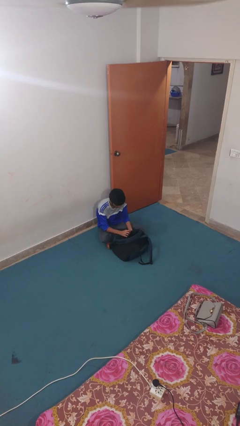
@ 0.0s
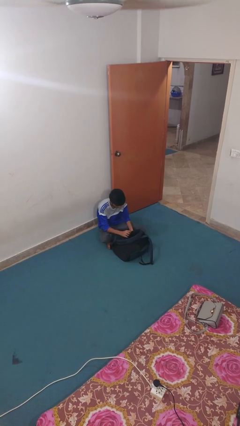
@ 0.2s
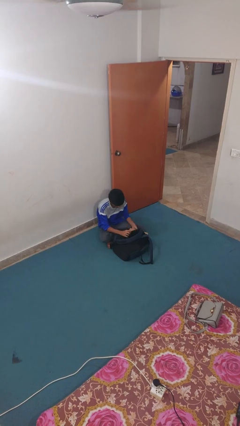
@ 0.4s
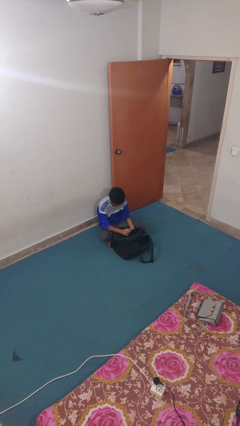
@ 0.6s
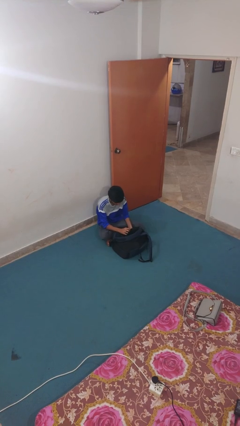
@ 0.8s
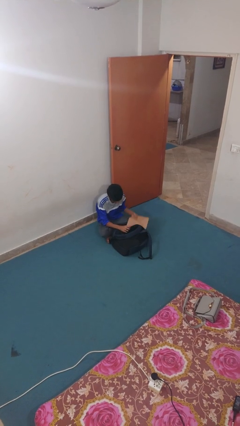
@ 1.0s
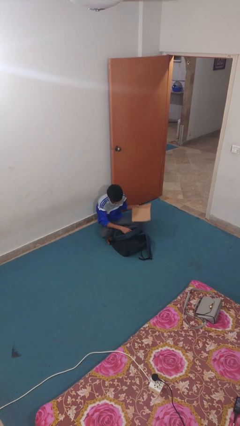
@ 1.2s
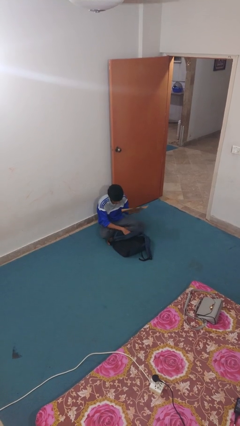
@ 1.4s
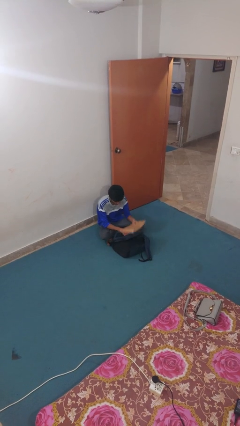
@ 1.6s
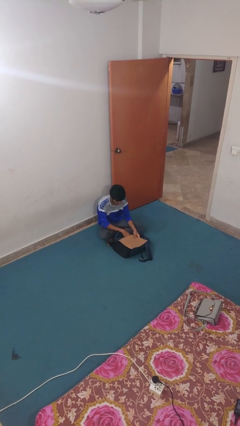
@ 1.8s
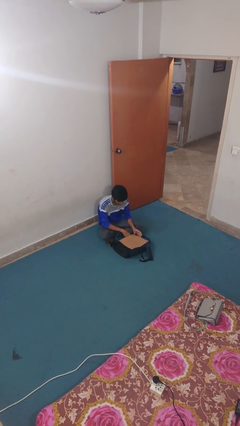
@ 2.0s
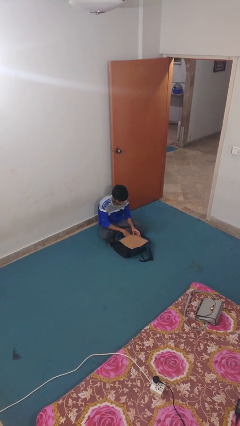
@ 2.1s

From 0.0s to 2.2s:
person takes object from backpack

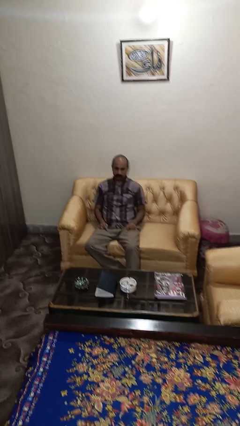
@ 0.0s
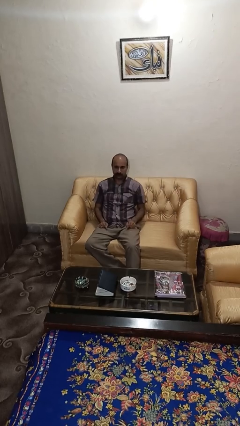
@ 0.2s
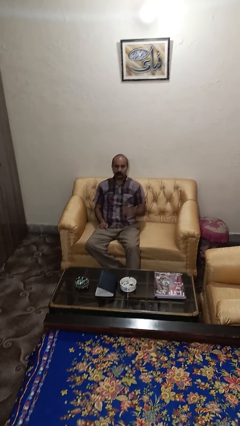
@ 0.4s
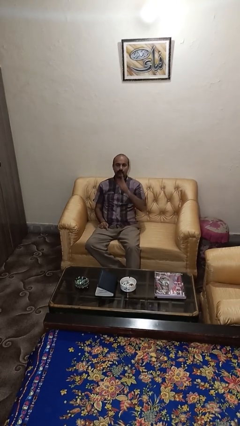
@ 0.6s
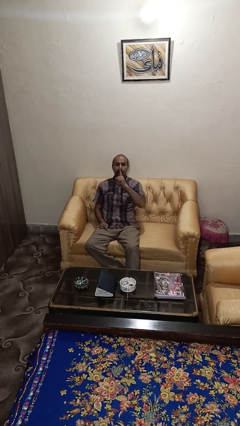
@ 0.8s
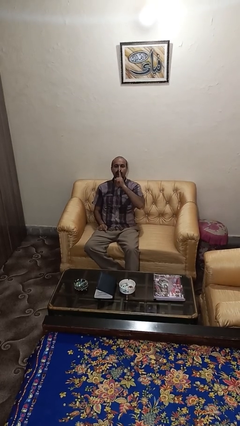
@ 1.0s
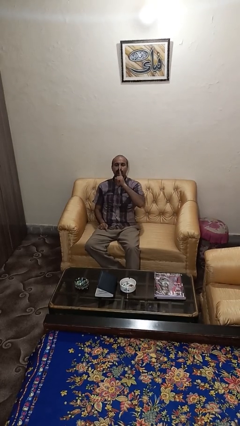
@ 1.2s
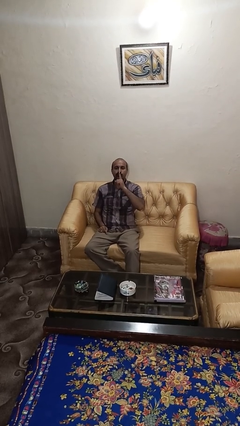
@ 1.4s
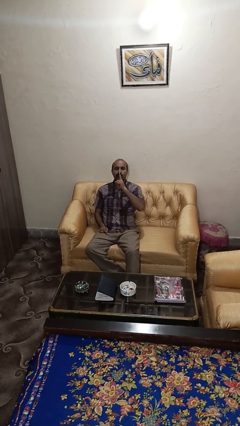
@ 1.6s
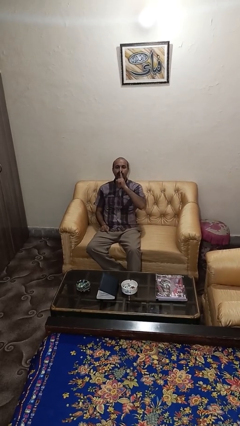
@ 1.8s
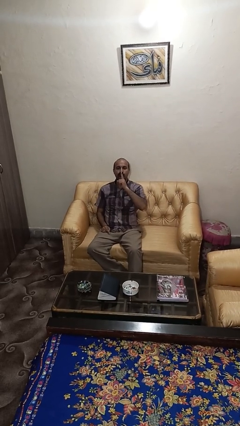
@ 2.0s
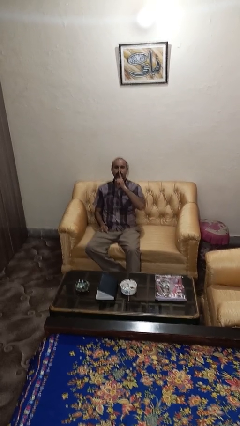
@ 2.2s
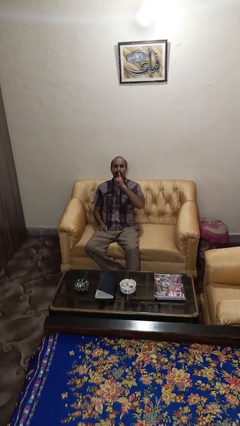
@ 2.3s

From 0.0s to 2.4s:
person gestures be quiet

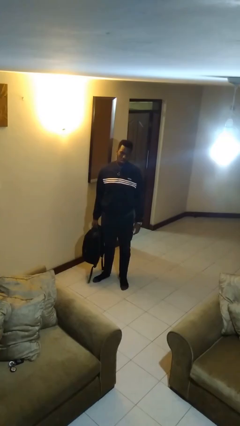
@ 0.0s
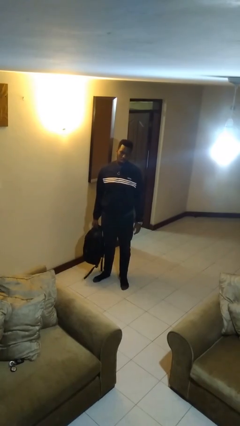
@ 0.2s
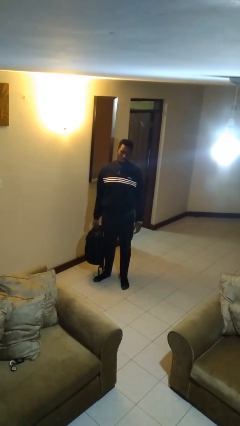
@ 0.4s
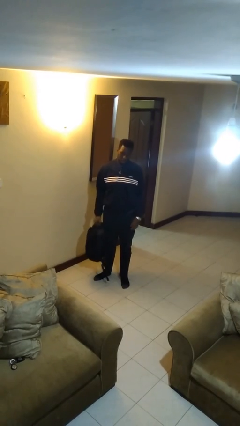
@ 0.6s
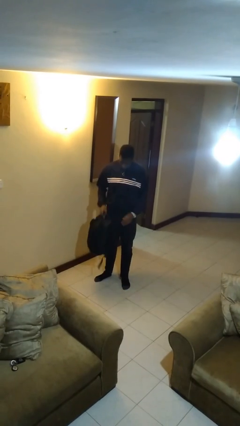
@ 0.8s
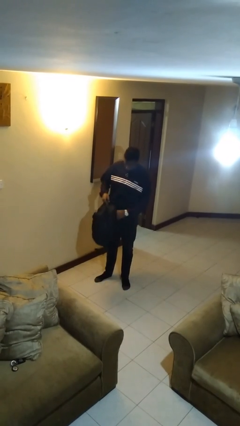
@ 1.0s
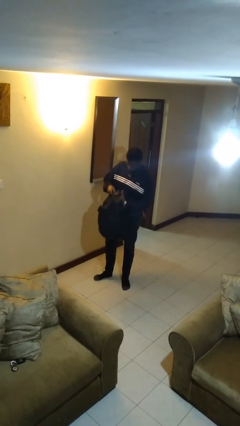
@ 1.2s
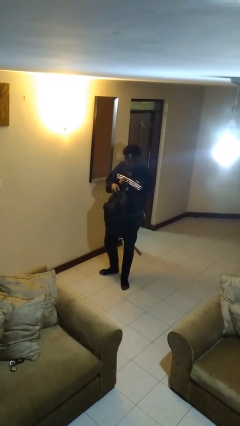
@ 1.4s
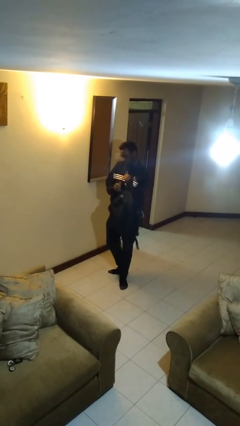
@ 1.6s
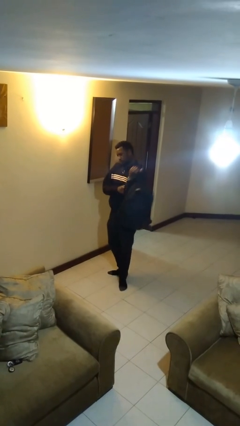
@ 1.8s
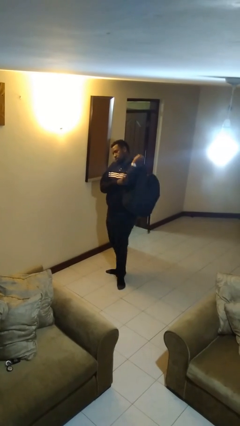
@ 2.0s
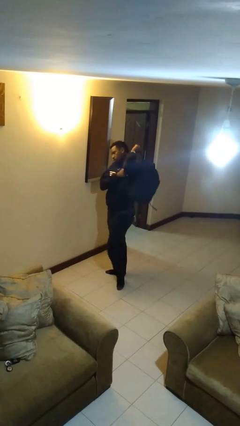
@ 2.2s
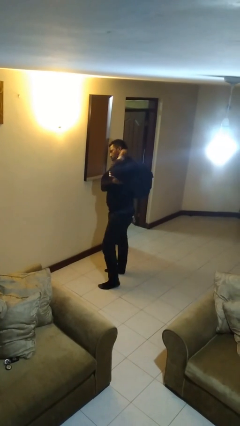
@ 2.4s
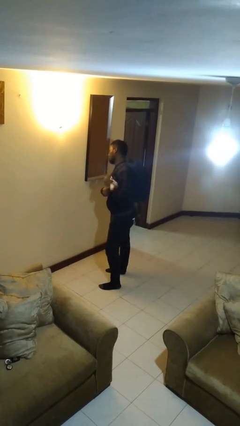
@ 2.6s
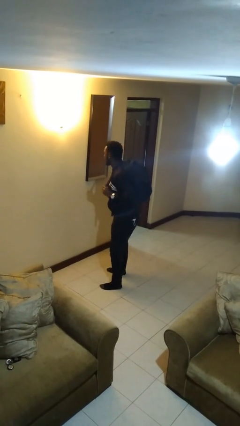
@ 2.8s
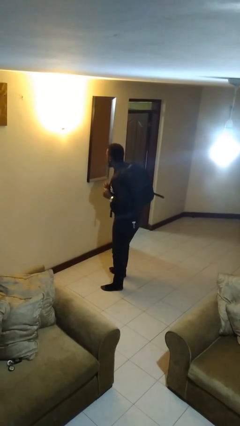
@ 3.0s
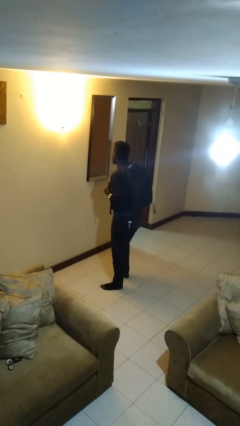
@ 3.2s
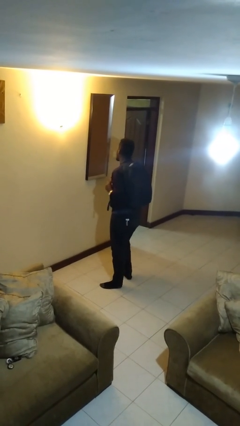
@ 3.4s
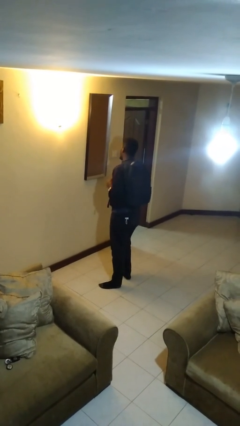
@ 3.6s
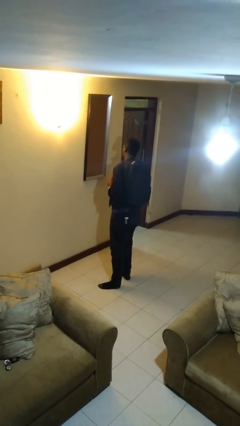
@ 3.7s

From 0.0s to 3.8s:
person puts on backpack

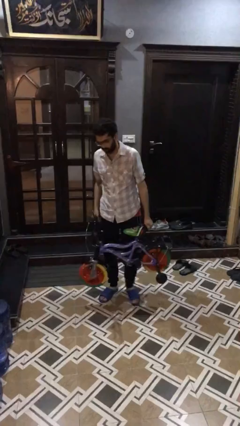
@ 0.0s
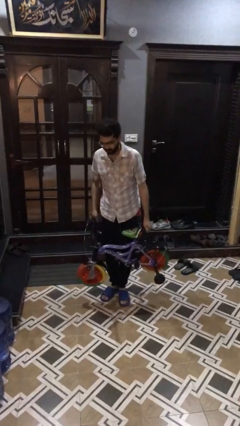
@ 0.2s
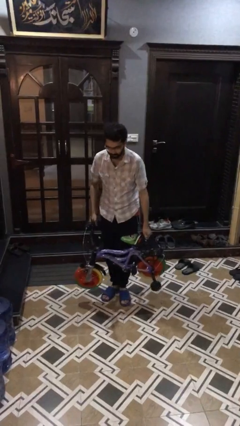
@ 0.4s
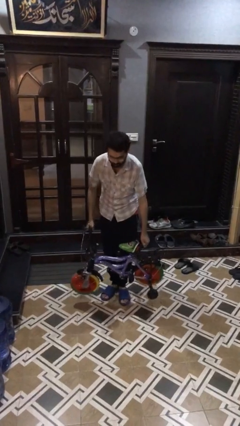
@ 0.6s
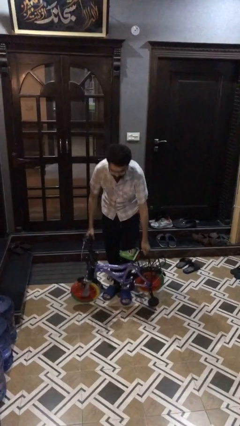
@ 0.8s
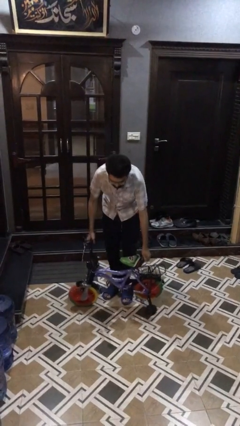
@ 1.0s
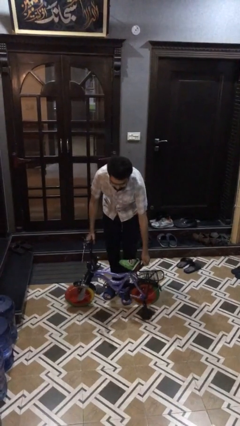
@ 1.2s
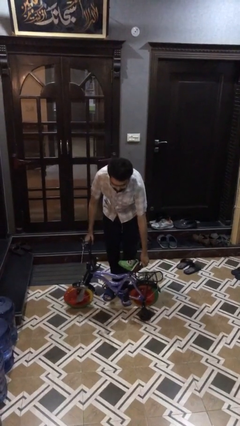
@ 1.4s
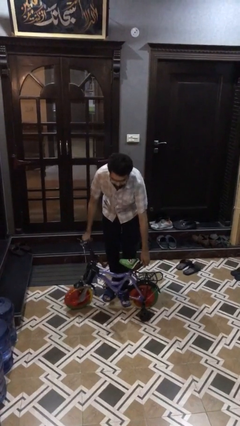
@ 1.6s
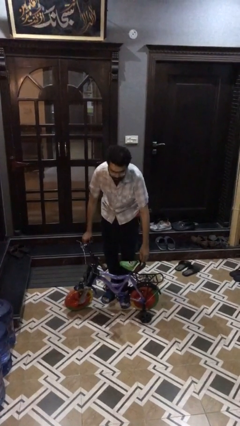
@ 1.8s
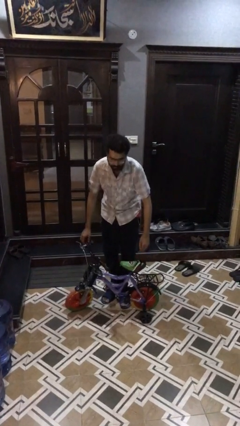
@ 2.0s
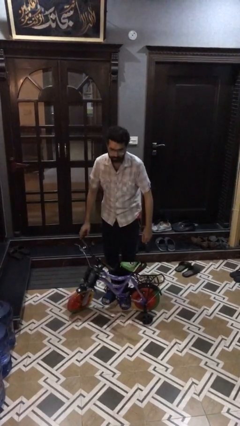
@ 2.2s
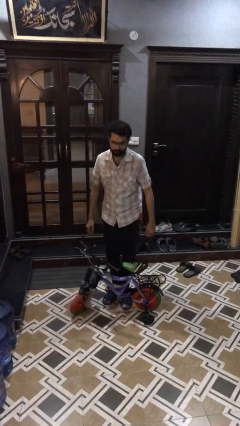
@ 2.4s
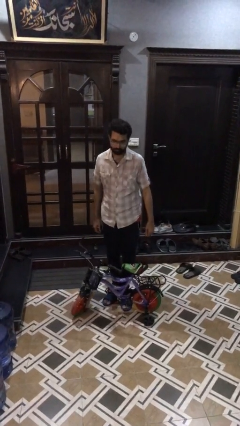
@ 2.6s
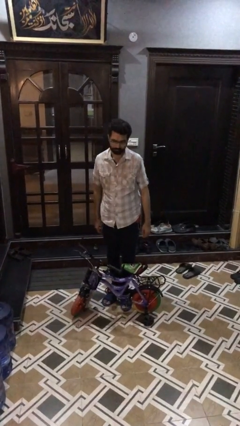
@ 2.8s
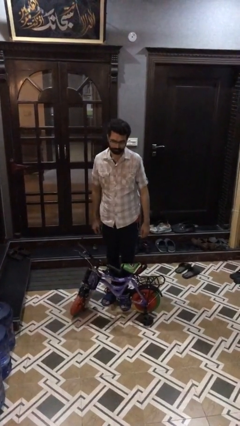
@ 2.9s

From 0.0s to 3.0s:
person puts down object on floor

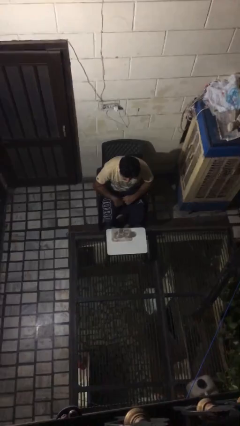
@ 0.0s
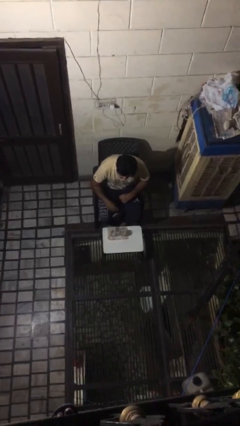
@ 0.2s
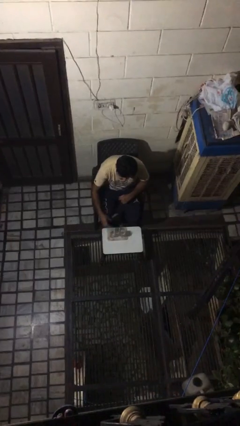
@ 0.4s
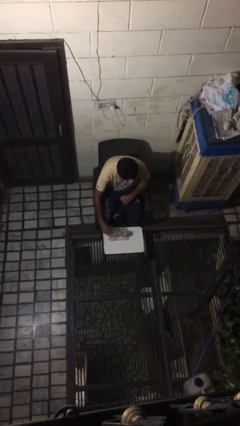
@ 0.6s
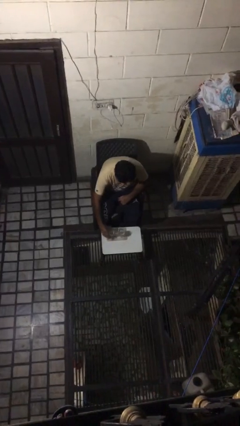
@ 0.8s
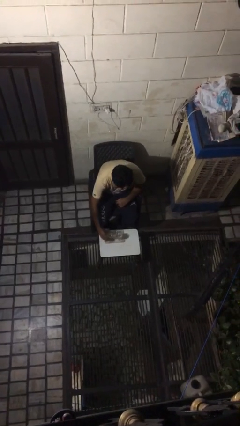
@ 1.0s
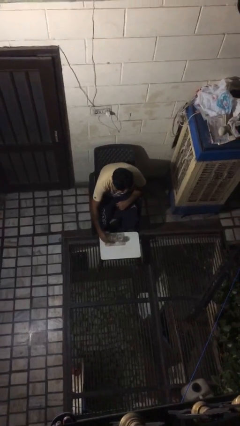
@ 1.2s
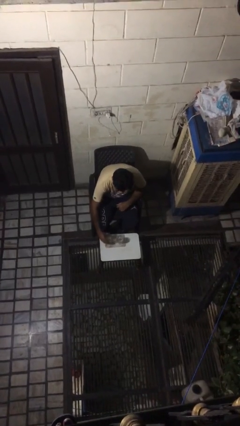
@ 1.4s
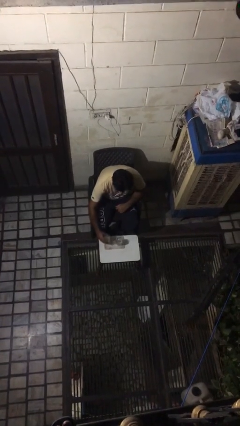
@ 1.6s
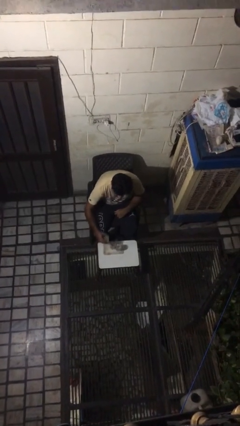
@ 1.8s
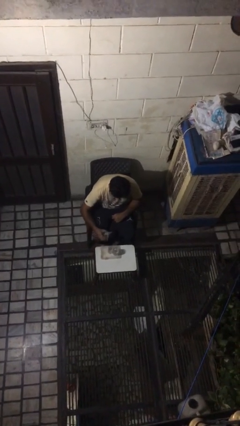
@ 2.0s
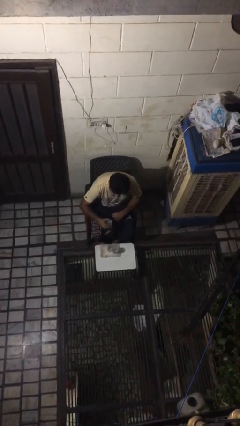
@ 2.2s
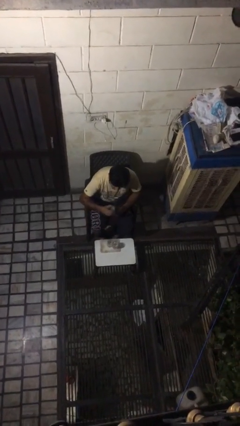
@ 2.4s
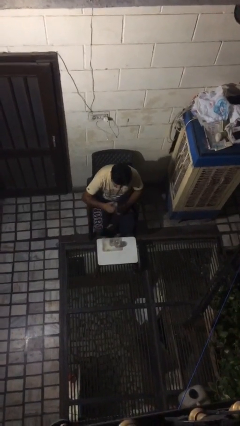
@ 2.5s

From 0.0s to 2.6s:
person picks up object from table

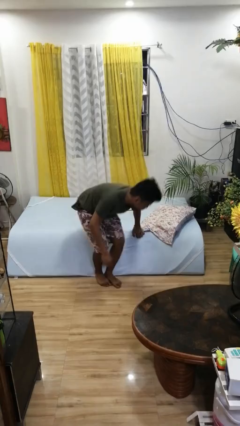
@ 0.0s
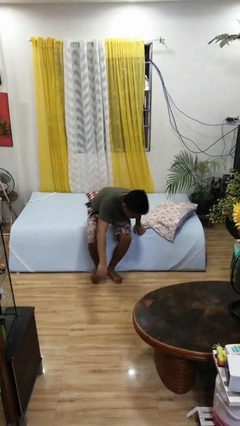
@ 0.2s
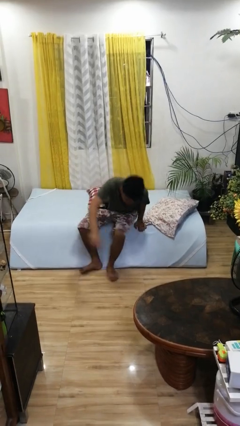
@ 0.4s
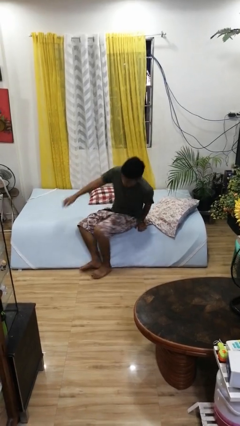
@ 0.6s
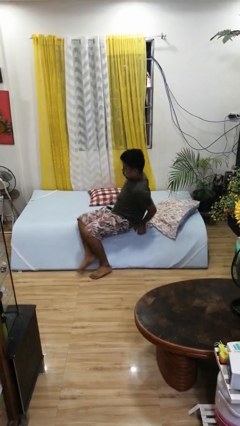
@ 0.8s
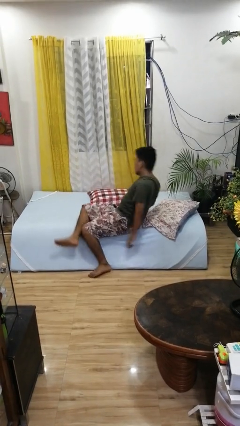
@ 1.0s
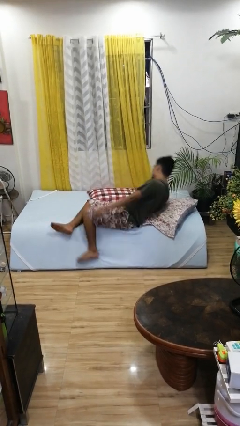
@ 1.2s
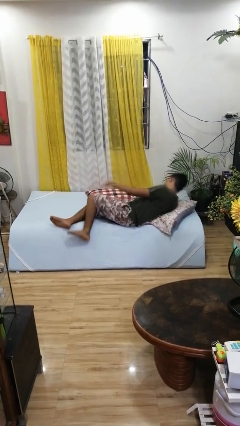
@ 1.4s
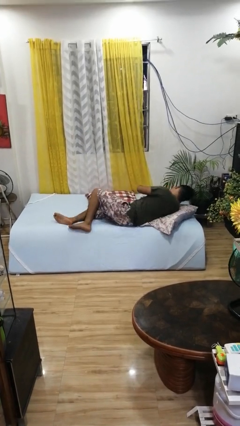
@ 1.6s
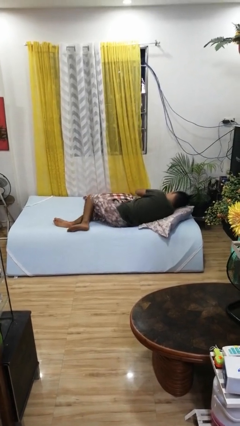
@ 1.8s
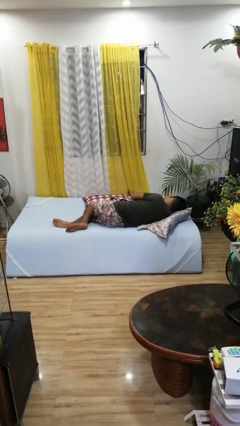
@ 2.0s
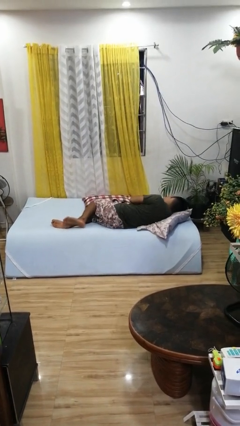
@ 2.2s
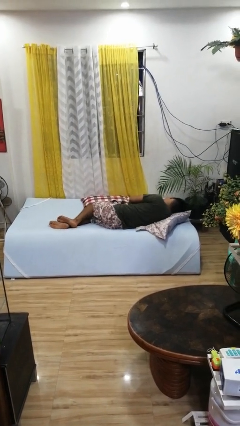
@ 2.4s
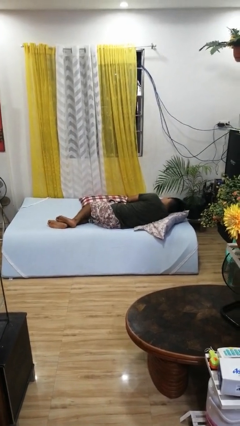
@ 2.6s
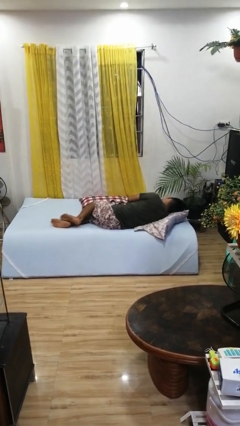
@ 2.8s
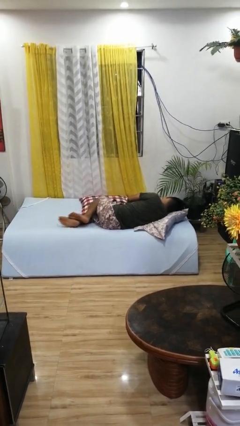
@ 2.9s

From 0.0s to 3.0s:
person lies down on bed

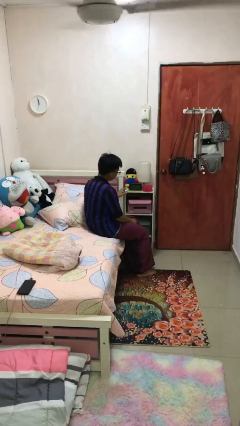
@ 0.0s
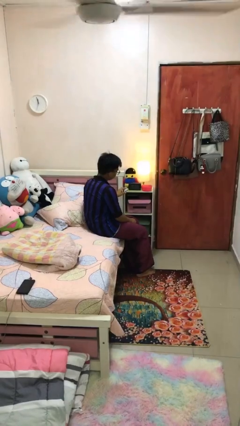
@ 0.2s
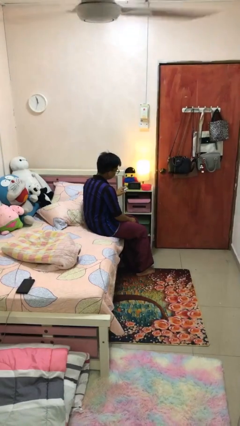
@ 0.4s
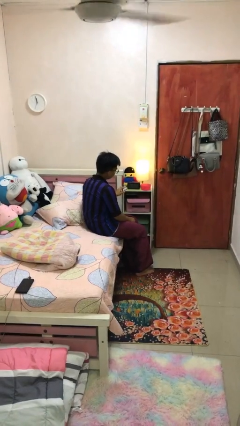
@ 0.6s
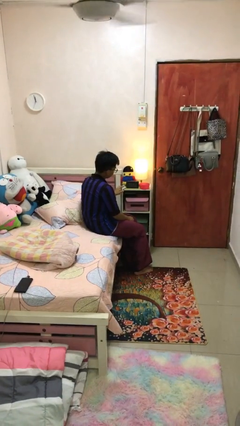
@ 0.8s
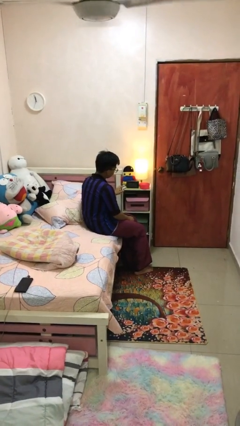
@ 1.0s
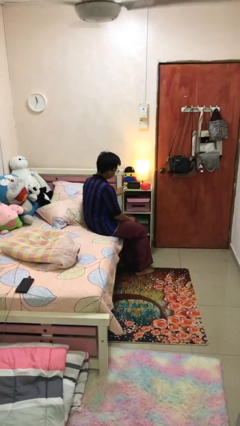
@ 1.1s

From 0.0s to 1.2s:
person turns on lamp
